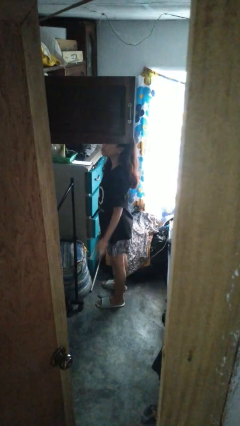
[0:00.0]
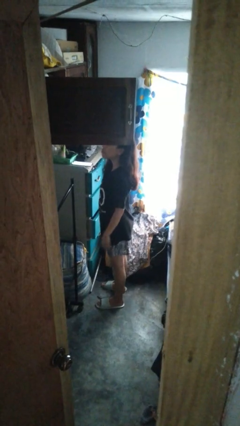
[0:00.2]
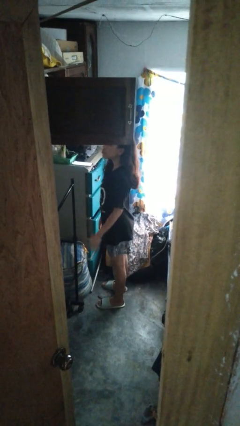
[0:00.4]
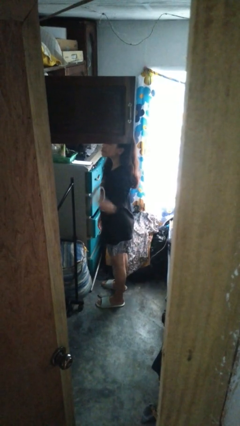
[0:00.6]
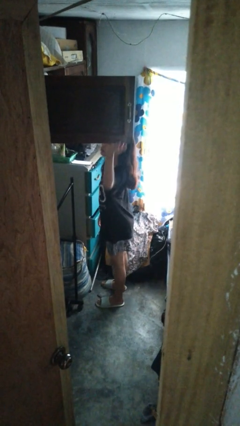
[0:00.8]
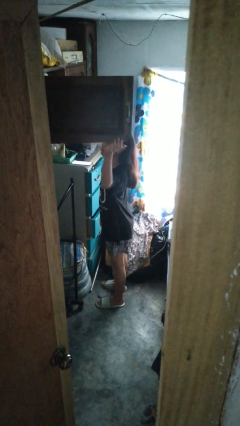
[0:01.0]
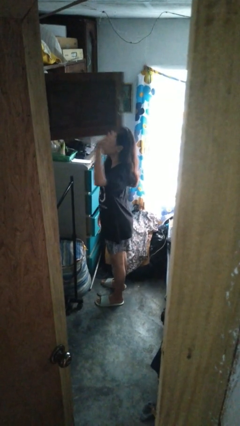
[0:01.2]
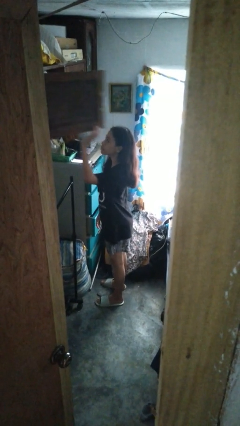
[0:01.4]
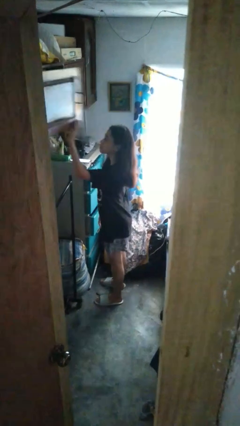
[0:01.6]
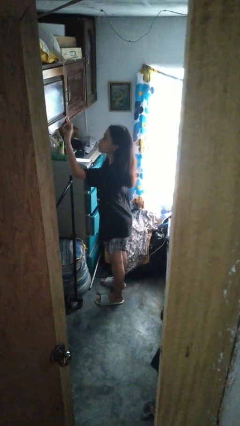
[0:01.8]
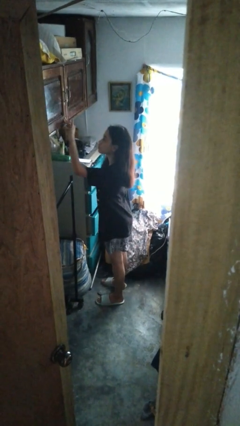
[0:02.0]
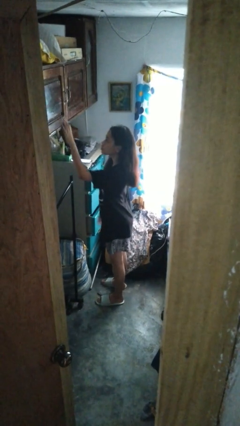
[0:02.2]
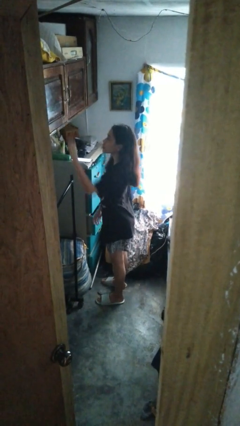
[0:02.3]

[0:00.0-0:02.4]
person closes closet door

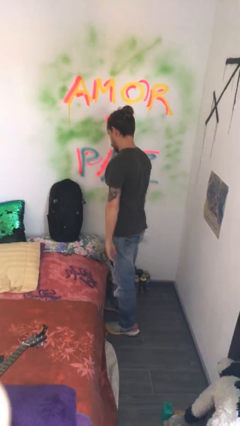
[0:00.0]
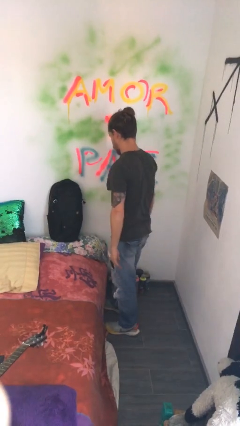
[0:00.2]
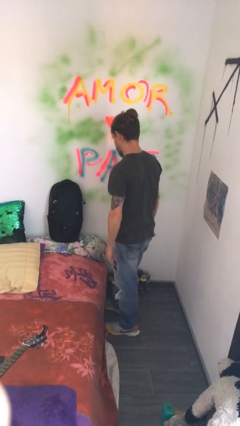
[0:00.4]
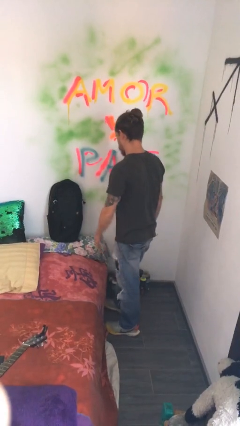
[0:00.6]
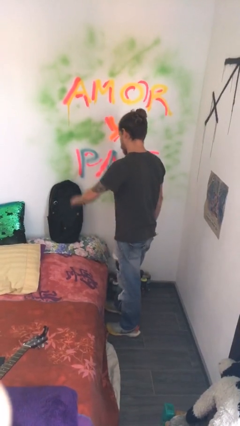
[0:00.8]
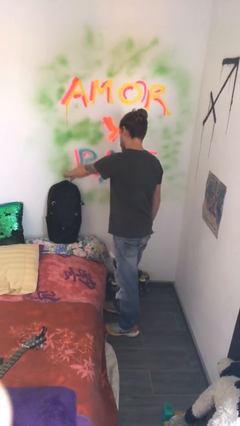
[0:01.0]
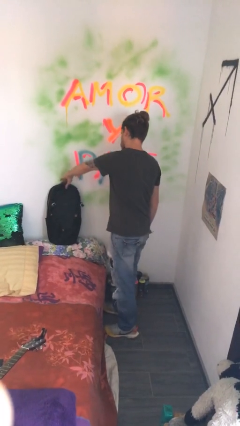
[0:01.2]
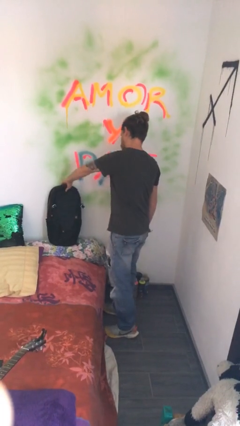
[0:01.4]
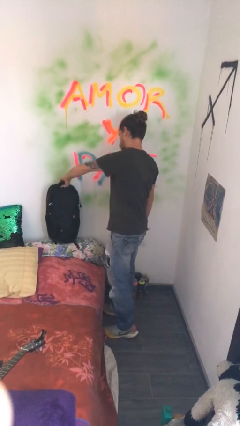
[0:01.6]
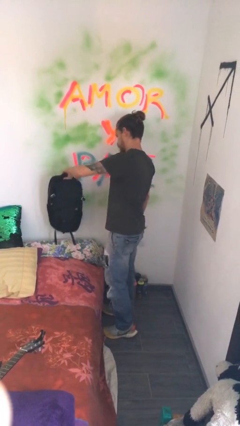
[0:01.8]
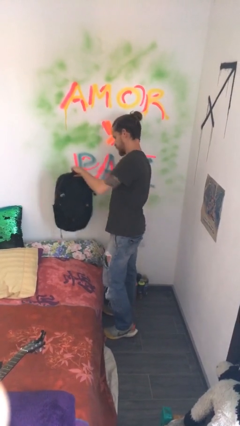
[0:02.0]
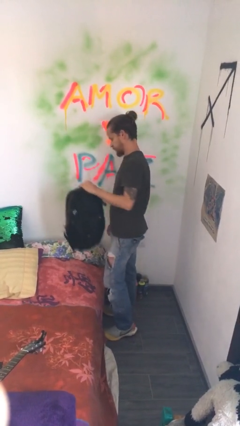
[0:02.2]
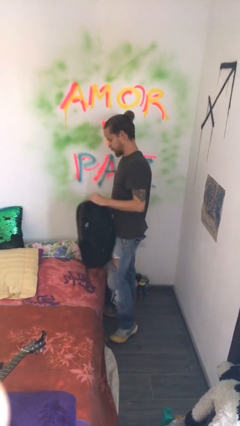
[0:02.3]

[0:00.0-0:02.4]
person picks up object from bed

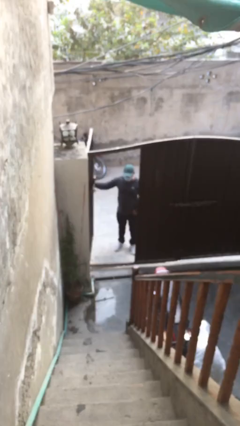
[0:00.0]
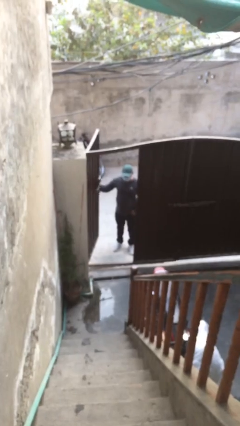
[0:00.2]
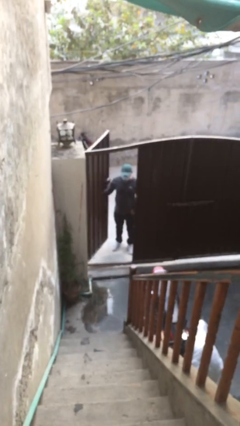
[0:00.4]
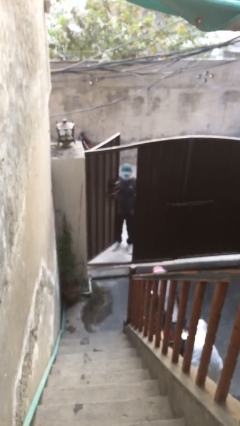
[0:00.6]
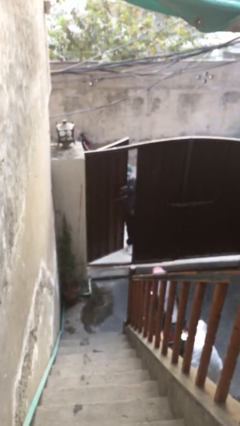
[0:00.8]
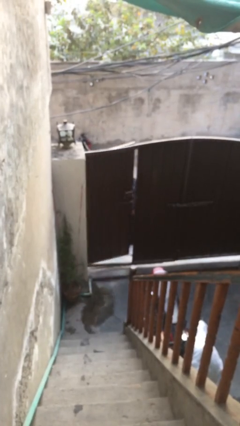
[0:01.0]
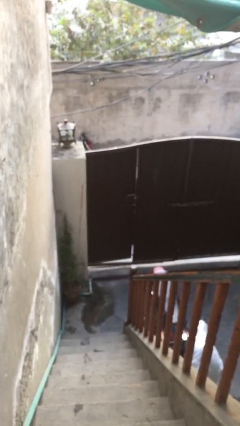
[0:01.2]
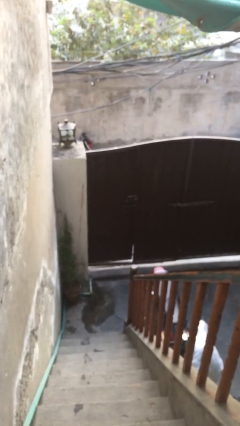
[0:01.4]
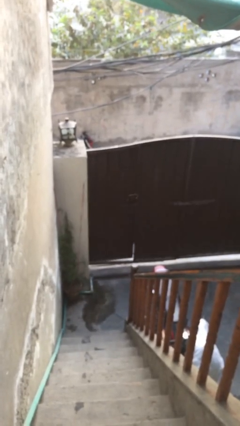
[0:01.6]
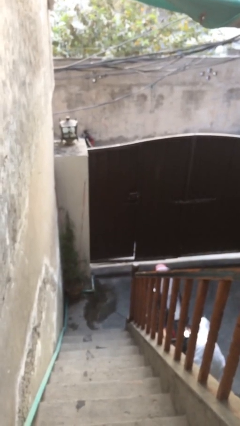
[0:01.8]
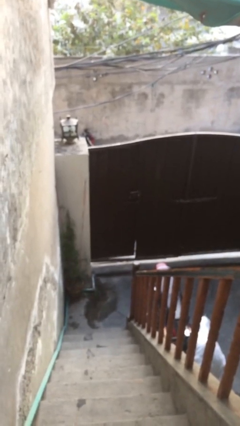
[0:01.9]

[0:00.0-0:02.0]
person closes facility door

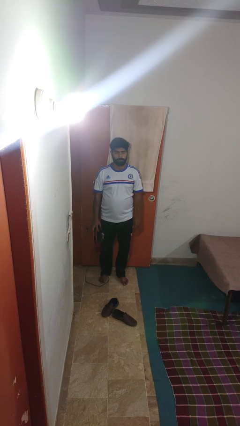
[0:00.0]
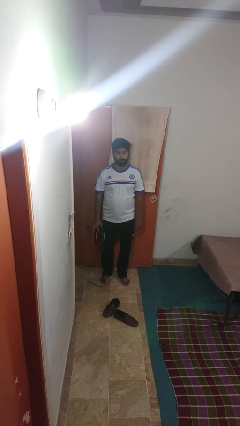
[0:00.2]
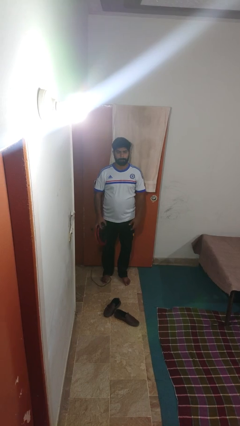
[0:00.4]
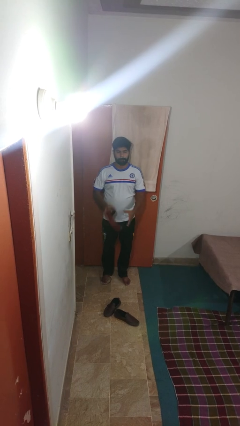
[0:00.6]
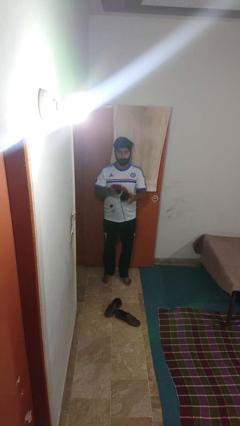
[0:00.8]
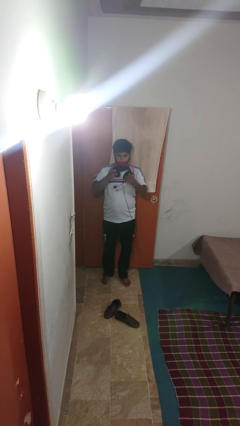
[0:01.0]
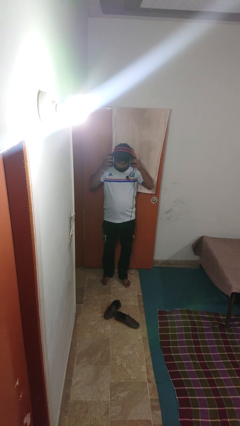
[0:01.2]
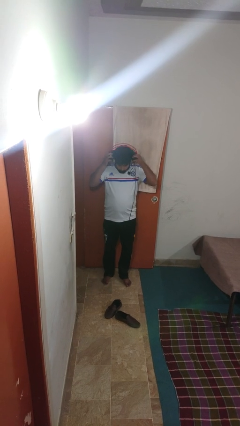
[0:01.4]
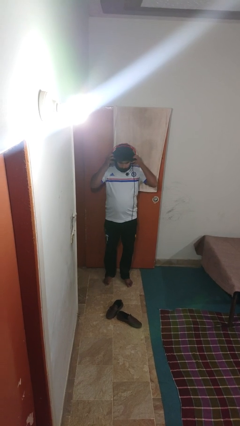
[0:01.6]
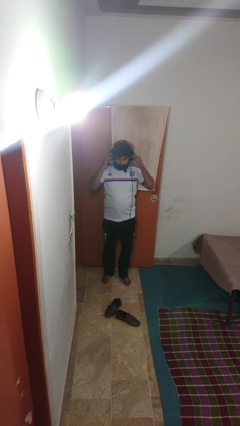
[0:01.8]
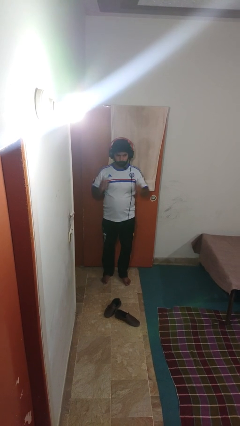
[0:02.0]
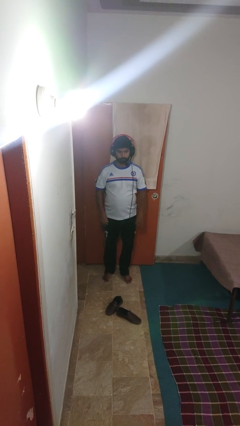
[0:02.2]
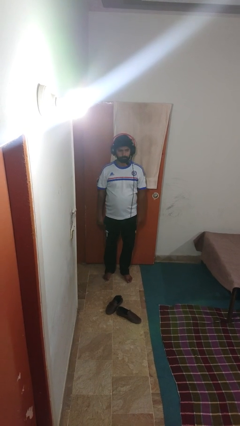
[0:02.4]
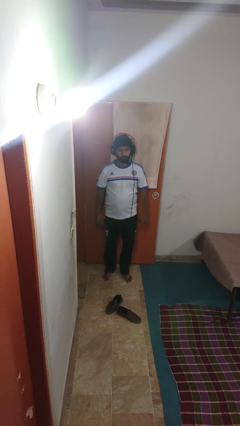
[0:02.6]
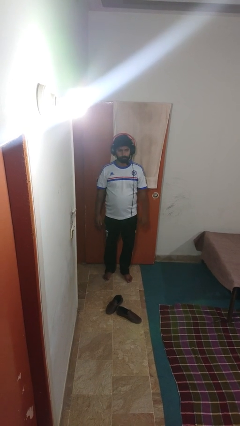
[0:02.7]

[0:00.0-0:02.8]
person puts on headphones

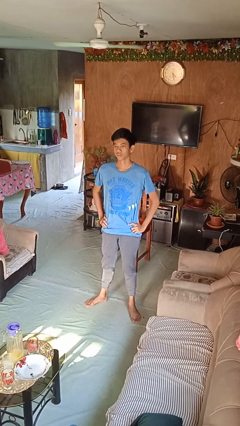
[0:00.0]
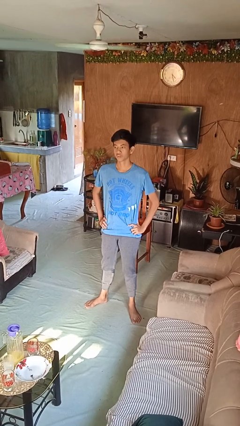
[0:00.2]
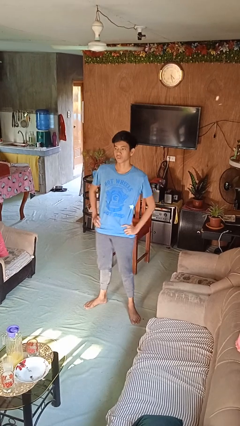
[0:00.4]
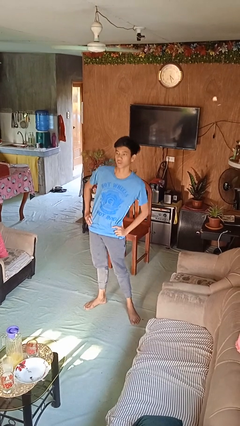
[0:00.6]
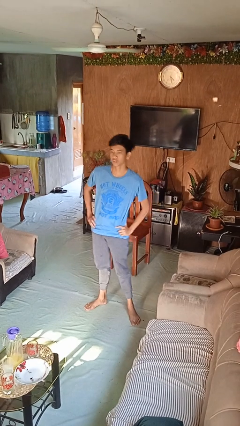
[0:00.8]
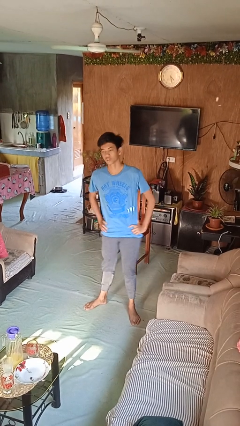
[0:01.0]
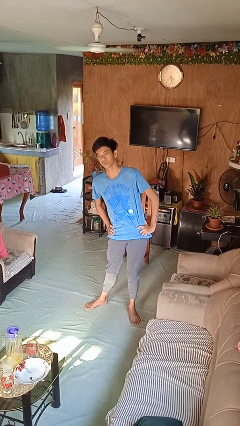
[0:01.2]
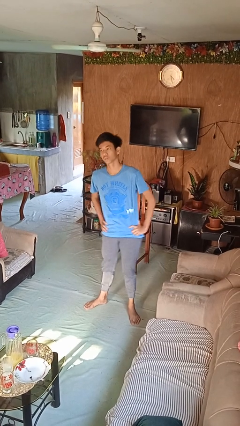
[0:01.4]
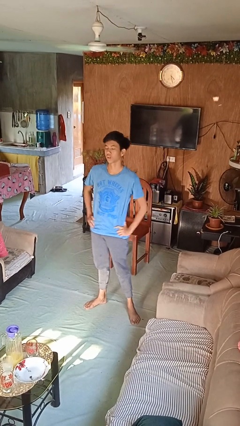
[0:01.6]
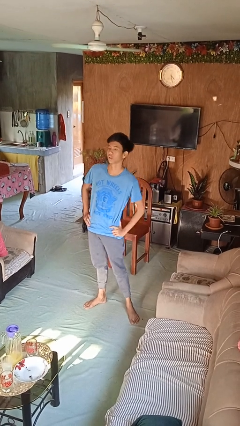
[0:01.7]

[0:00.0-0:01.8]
person wiggles hips

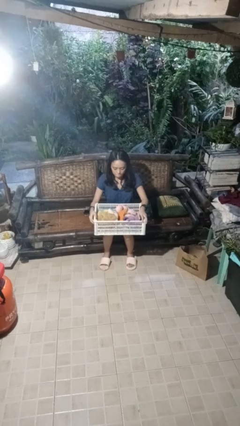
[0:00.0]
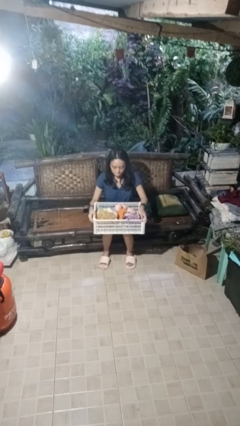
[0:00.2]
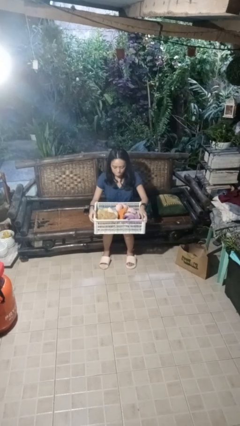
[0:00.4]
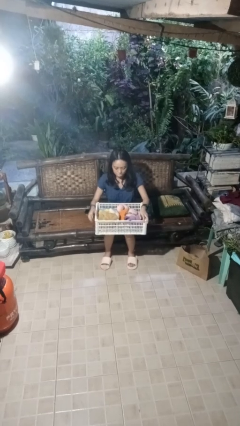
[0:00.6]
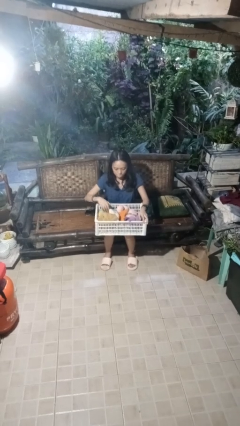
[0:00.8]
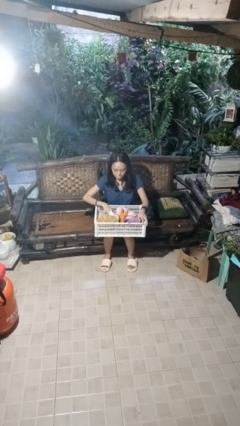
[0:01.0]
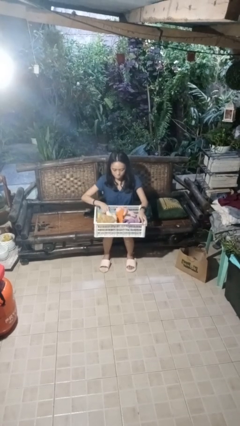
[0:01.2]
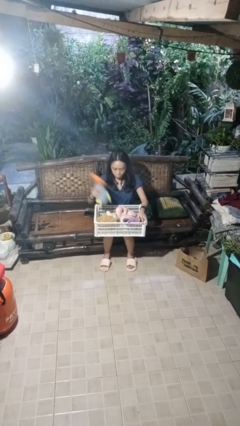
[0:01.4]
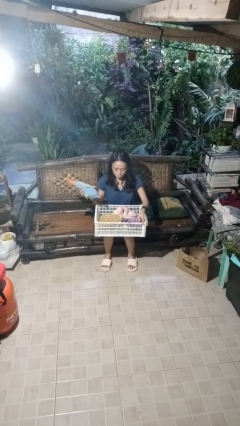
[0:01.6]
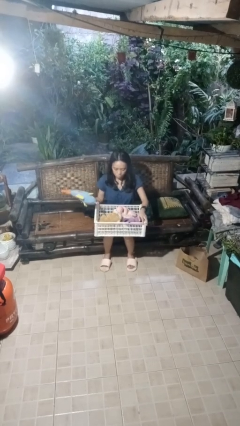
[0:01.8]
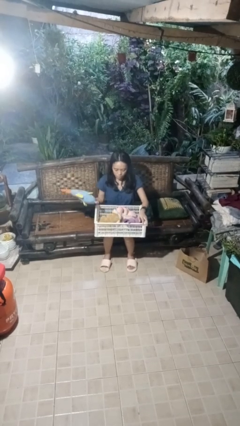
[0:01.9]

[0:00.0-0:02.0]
person takes object from basket

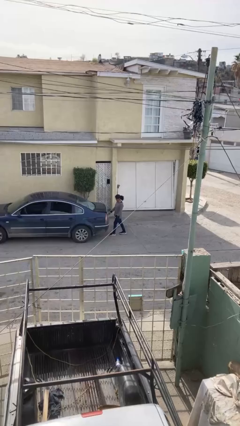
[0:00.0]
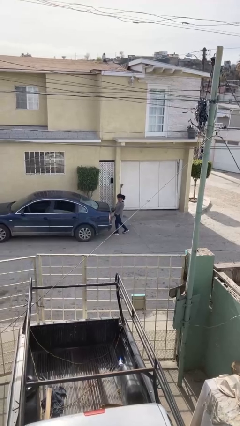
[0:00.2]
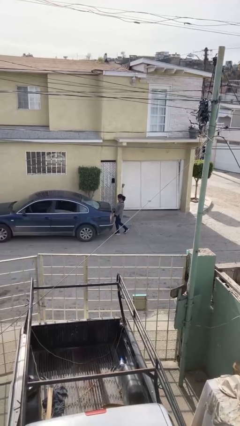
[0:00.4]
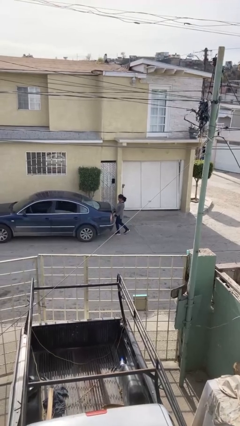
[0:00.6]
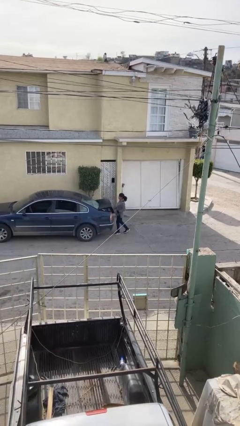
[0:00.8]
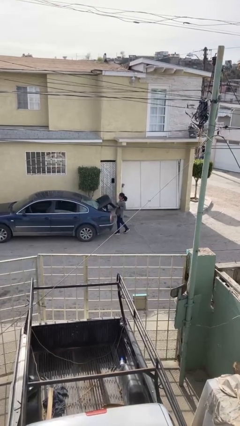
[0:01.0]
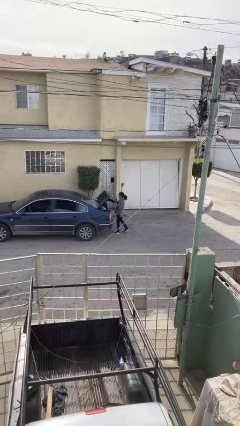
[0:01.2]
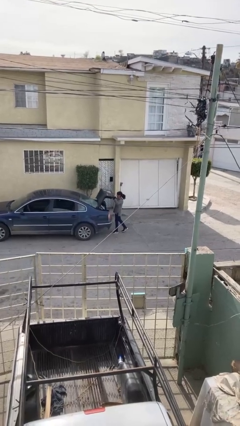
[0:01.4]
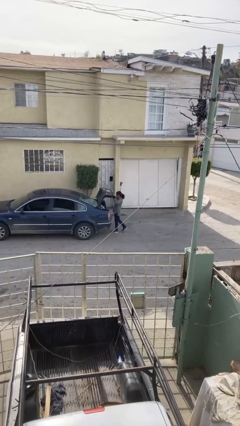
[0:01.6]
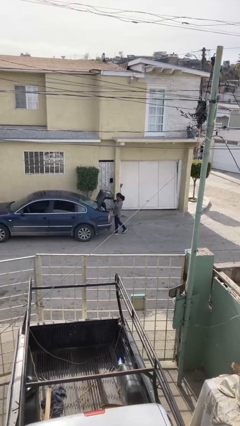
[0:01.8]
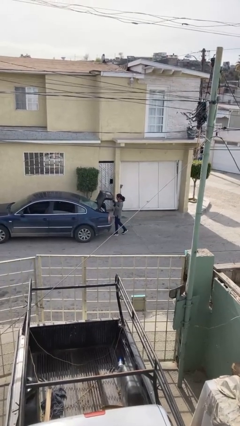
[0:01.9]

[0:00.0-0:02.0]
person opens car trunk

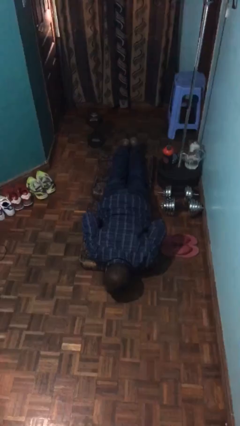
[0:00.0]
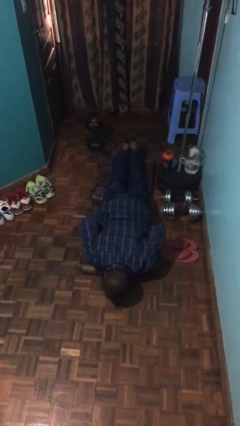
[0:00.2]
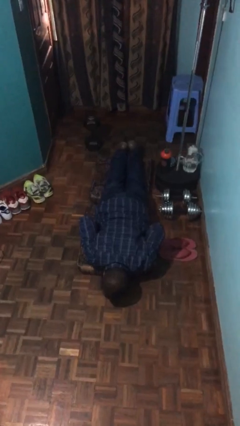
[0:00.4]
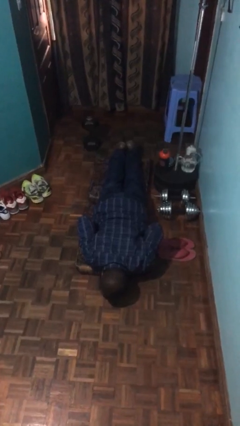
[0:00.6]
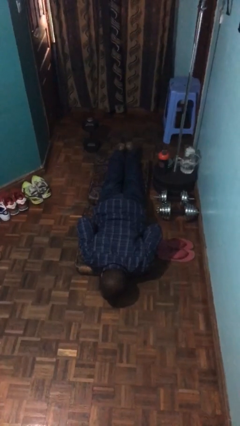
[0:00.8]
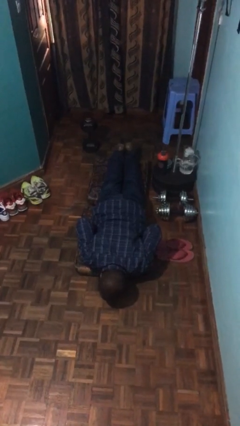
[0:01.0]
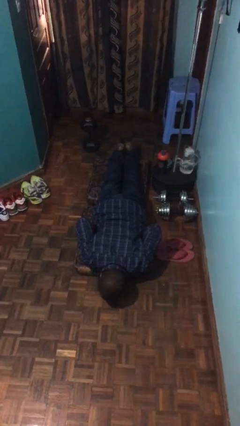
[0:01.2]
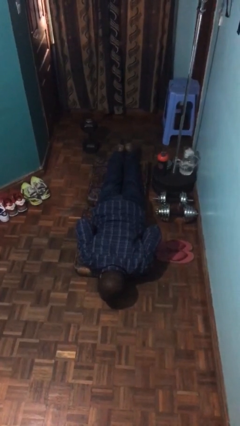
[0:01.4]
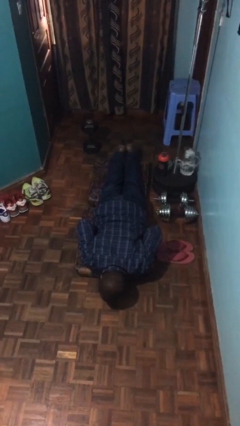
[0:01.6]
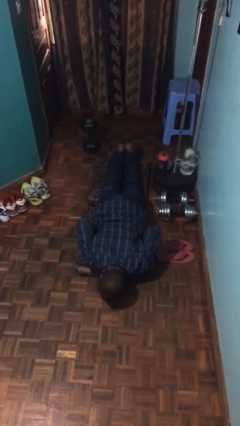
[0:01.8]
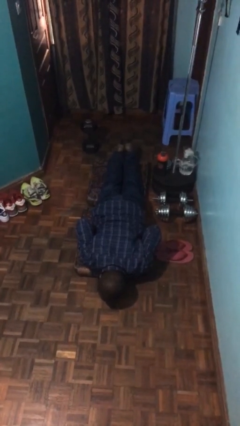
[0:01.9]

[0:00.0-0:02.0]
person lies down on floor
